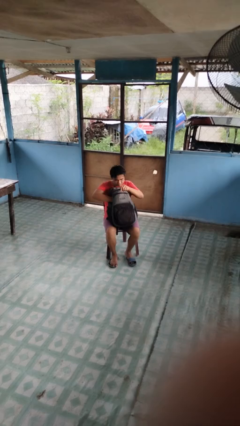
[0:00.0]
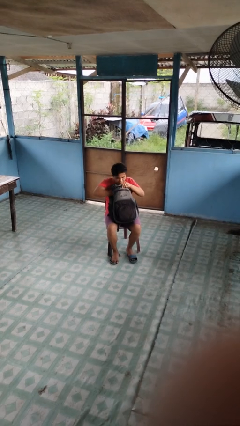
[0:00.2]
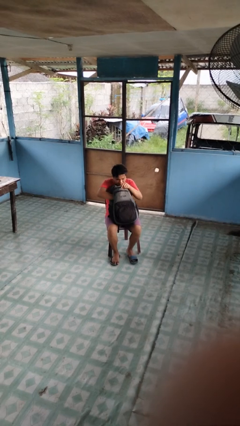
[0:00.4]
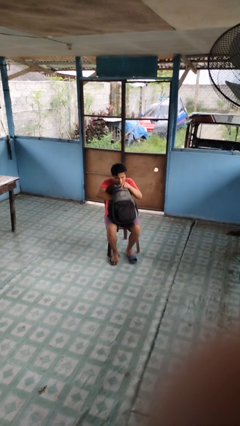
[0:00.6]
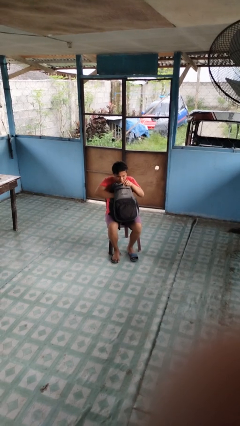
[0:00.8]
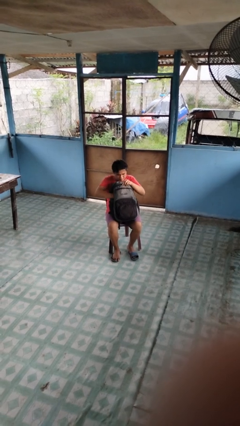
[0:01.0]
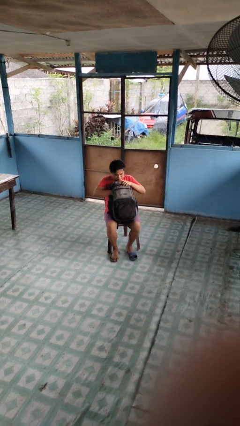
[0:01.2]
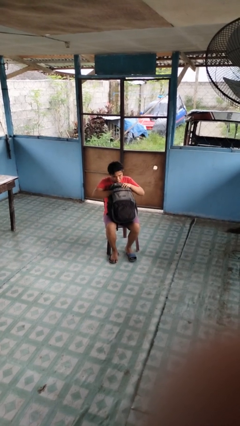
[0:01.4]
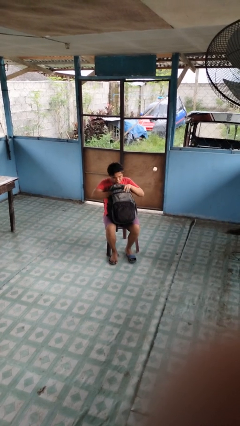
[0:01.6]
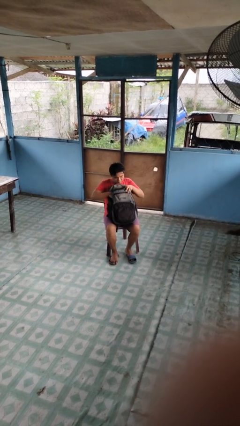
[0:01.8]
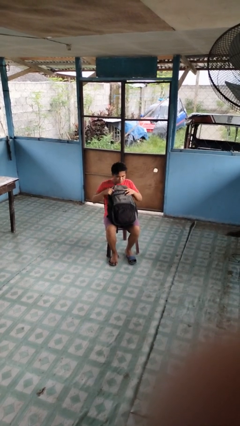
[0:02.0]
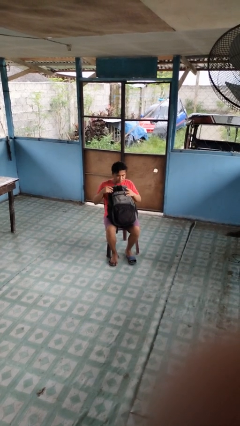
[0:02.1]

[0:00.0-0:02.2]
person searches in backpack

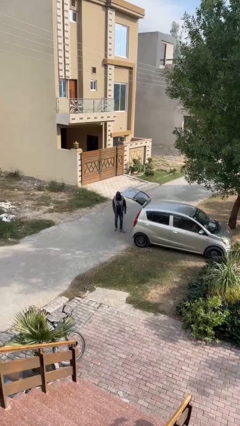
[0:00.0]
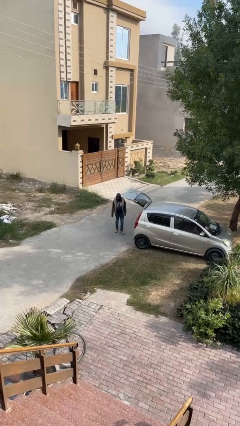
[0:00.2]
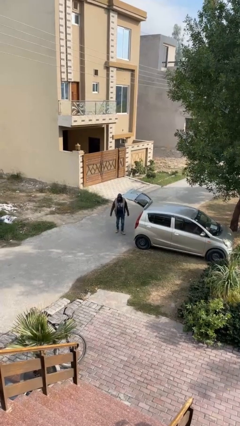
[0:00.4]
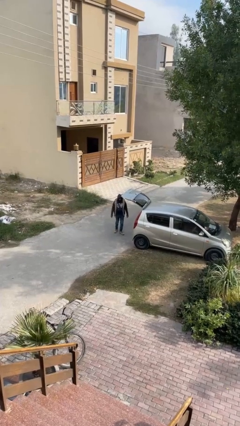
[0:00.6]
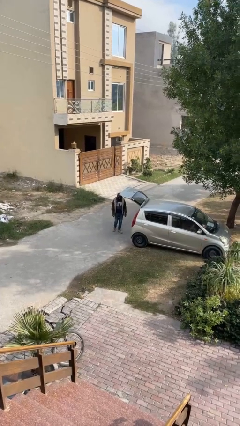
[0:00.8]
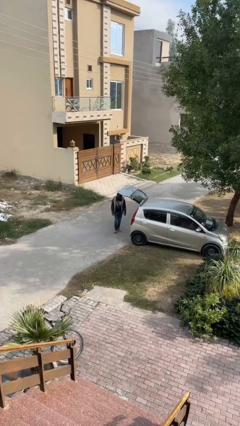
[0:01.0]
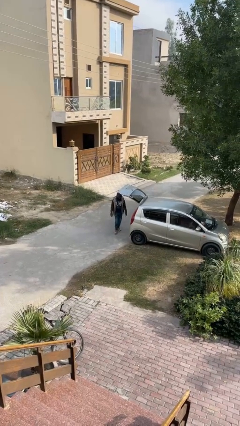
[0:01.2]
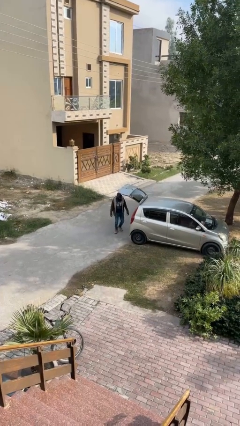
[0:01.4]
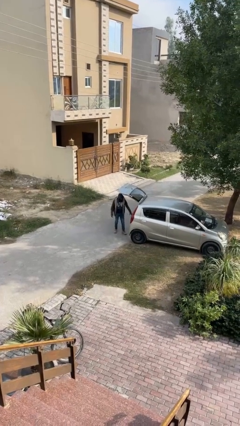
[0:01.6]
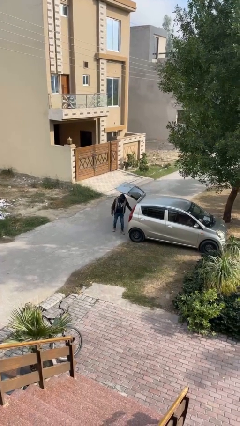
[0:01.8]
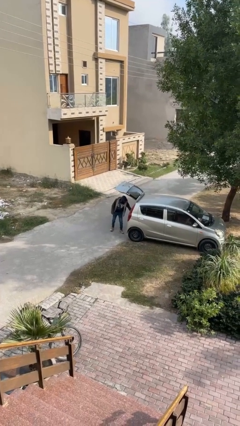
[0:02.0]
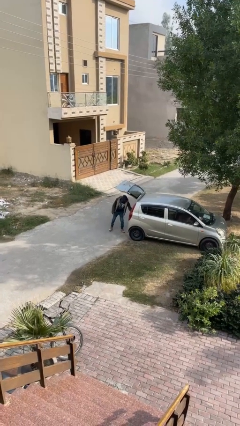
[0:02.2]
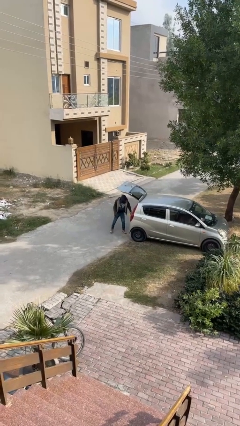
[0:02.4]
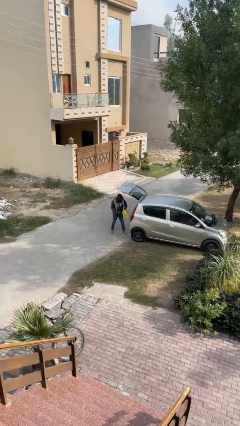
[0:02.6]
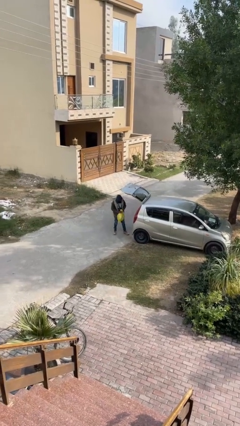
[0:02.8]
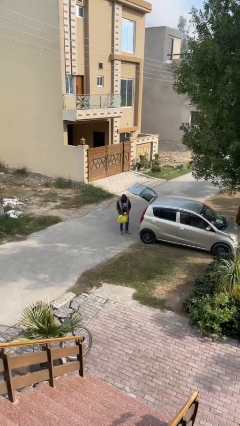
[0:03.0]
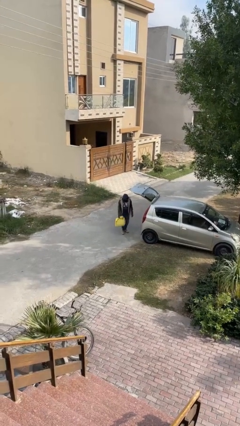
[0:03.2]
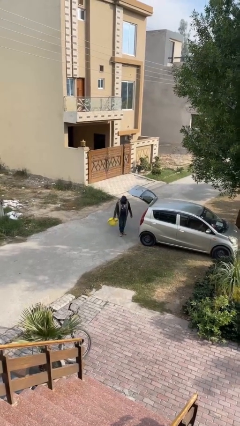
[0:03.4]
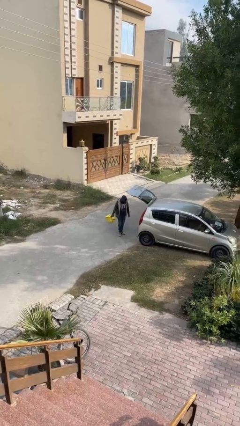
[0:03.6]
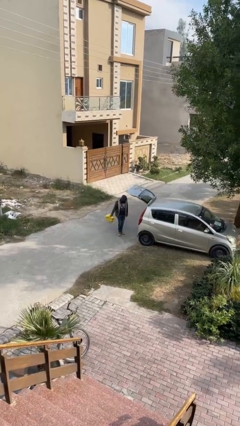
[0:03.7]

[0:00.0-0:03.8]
person unloads car

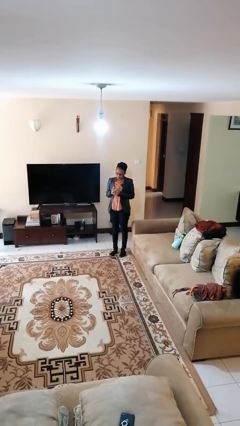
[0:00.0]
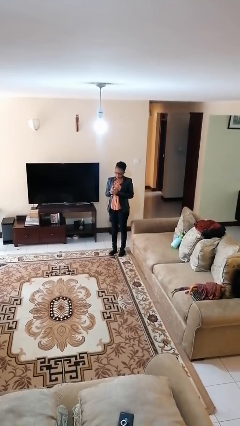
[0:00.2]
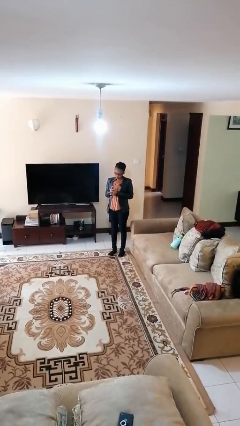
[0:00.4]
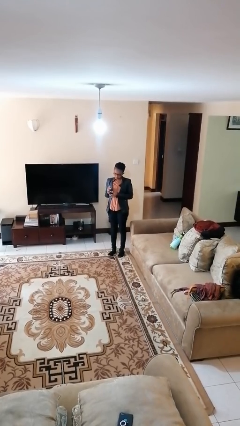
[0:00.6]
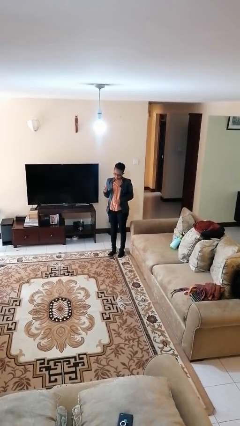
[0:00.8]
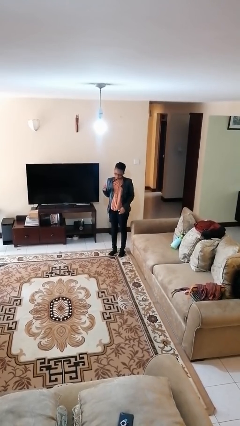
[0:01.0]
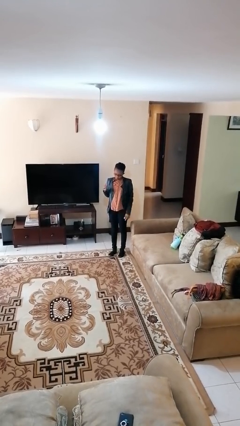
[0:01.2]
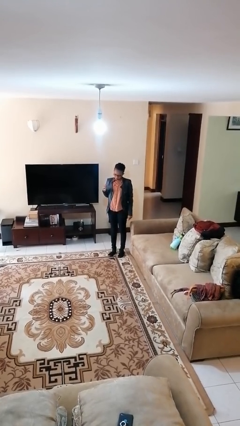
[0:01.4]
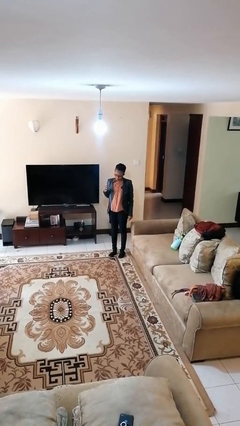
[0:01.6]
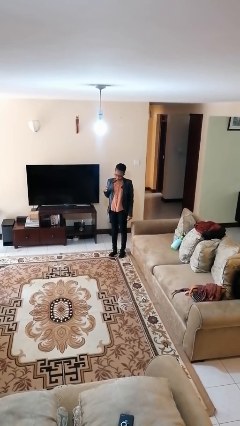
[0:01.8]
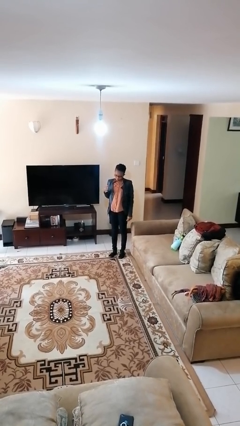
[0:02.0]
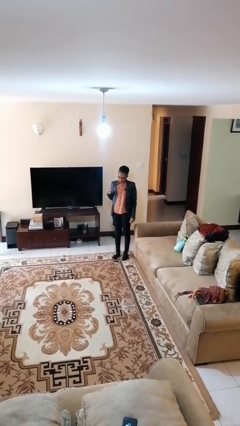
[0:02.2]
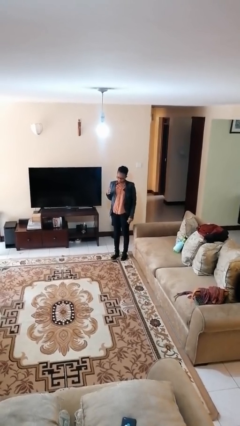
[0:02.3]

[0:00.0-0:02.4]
person puts on ring

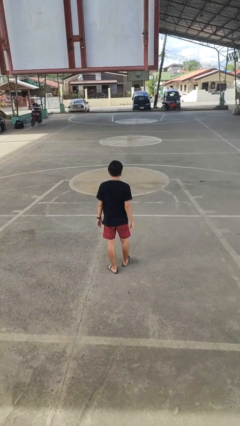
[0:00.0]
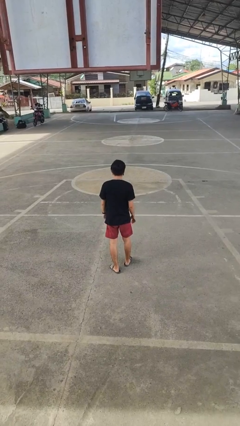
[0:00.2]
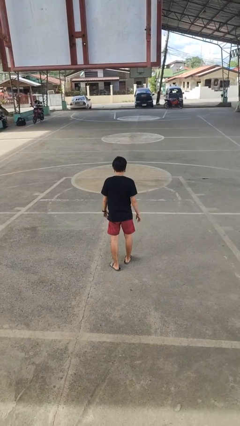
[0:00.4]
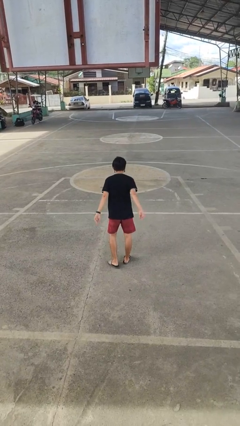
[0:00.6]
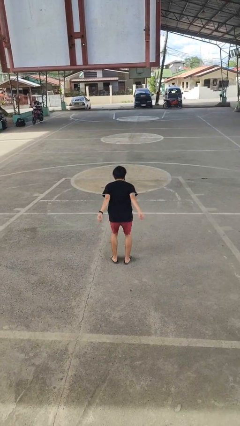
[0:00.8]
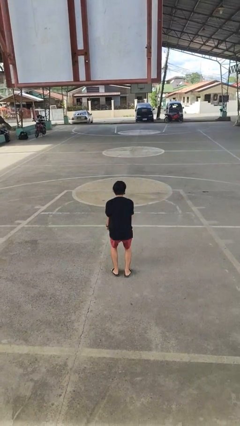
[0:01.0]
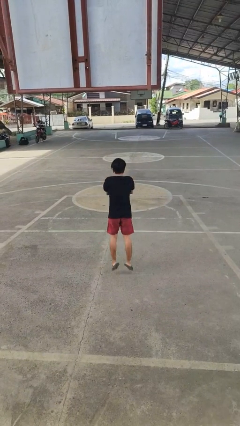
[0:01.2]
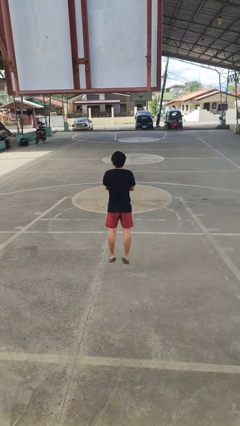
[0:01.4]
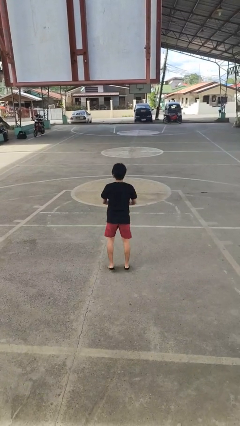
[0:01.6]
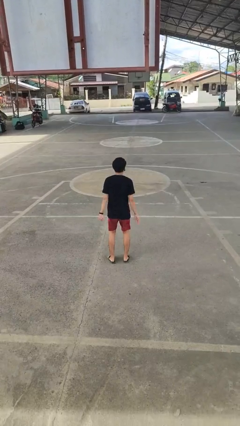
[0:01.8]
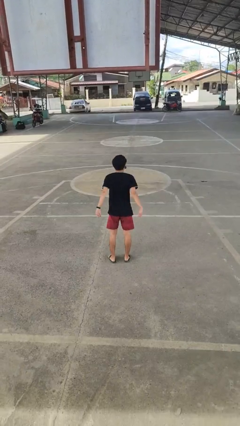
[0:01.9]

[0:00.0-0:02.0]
person jumps

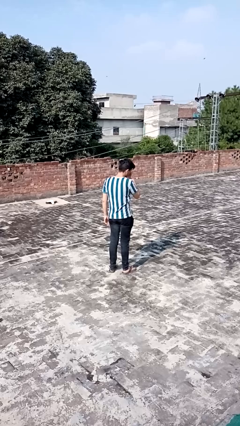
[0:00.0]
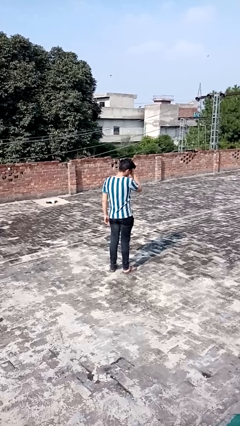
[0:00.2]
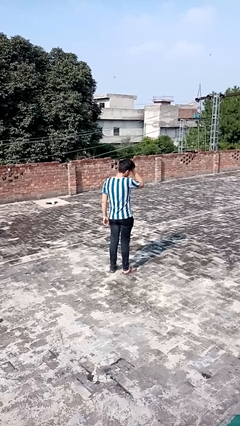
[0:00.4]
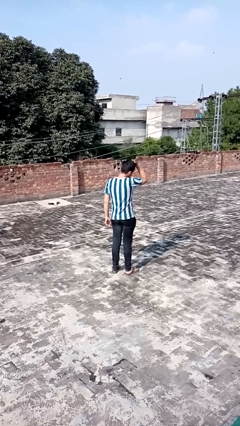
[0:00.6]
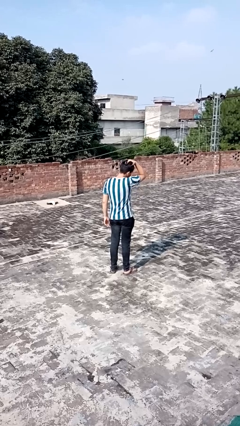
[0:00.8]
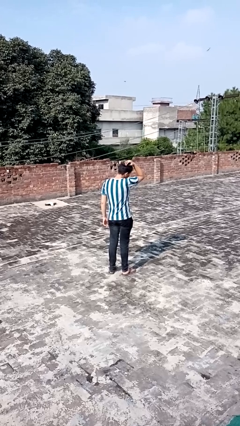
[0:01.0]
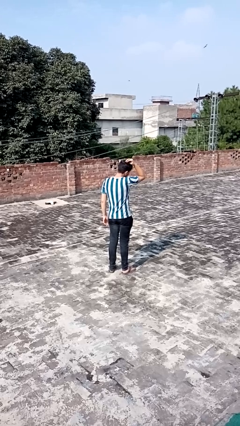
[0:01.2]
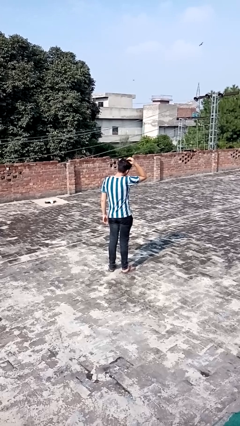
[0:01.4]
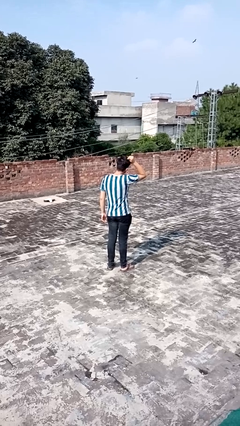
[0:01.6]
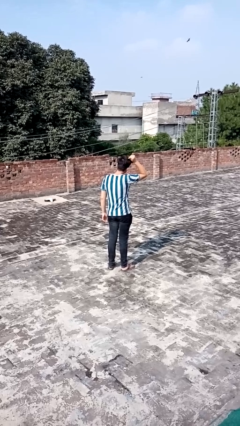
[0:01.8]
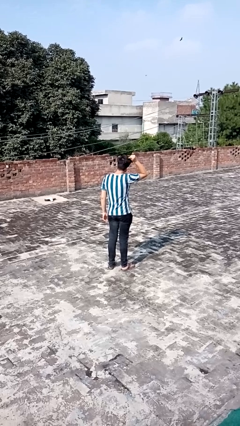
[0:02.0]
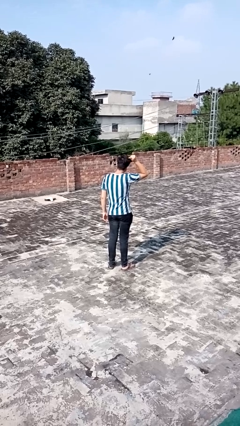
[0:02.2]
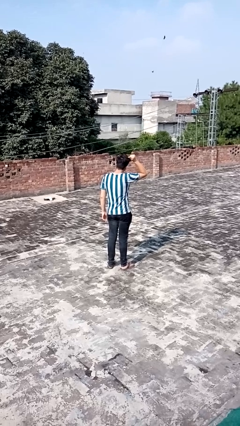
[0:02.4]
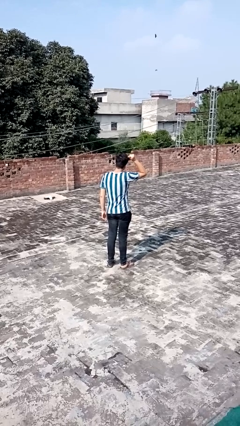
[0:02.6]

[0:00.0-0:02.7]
person strokes hair

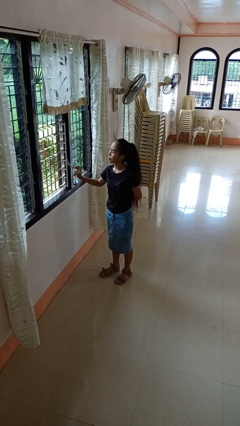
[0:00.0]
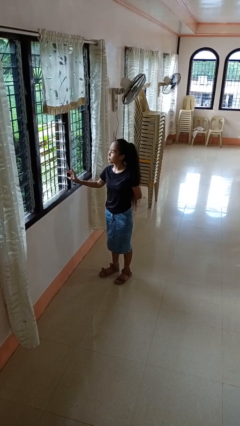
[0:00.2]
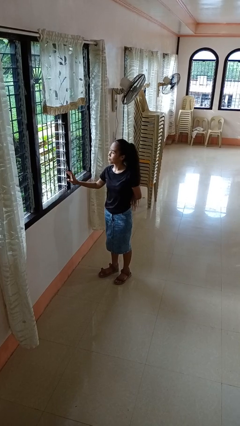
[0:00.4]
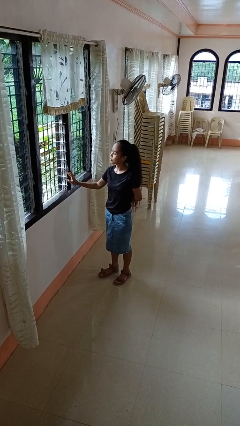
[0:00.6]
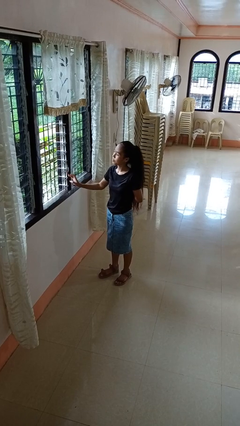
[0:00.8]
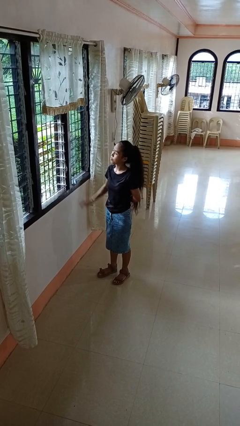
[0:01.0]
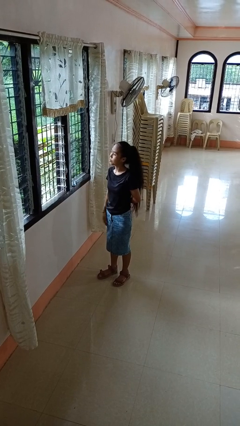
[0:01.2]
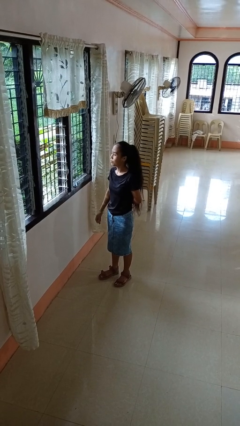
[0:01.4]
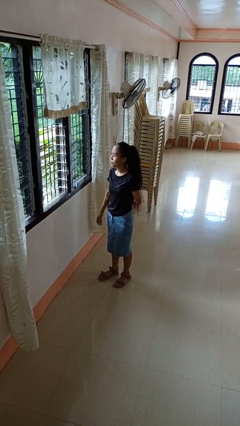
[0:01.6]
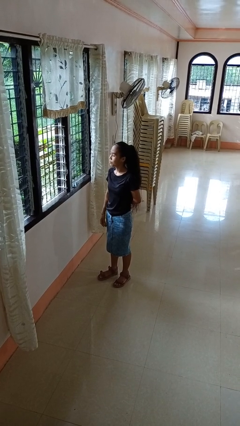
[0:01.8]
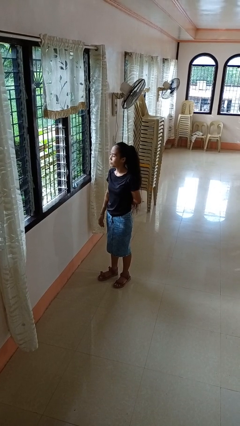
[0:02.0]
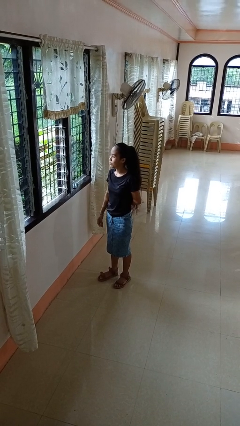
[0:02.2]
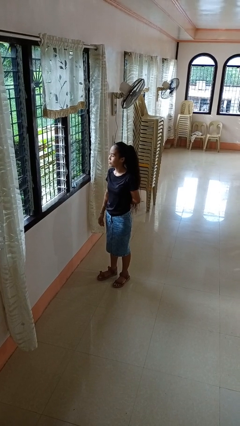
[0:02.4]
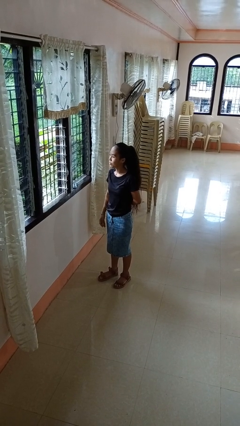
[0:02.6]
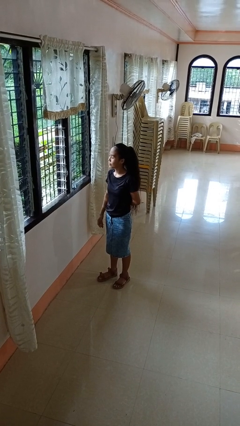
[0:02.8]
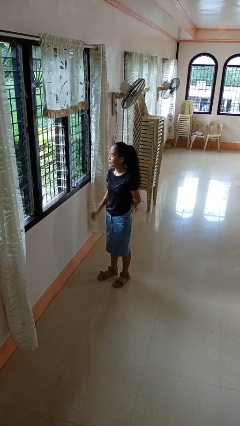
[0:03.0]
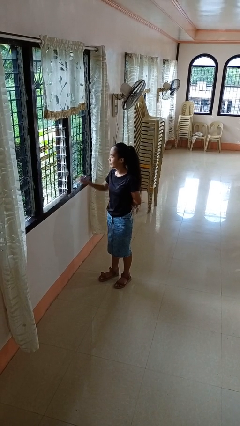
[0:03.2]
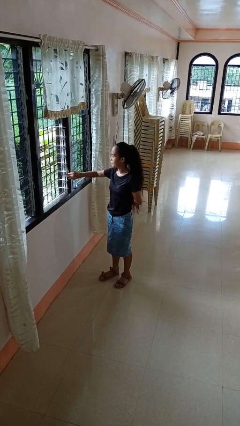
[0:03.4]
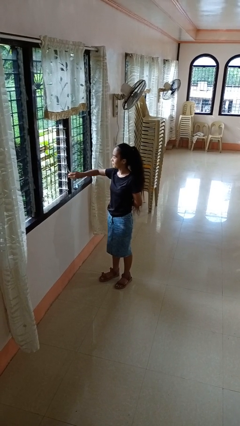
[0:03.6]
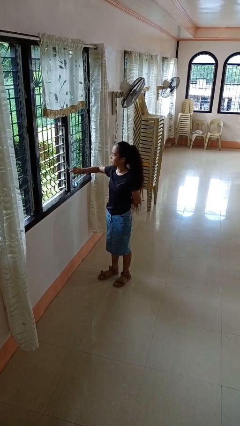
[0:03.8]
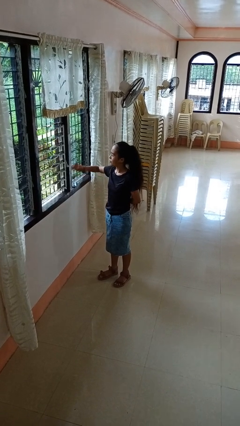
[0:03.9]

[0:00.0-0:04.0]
person opens home window
